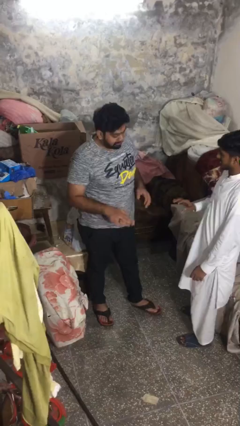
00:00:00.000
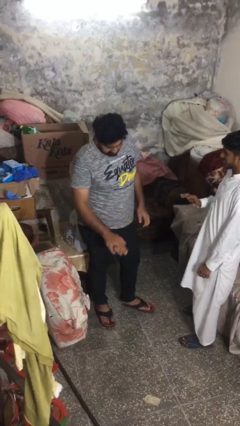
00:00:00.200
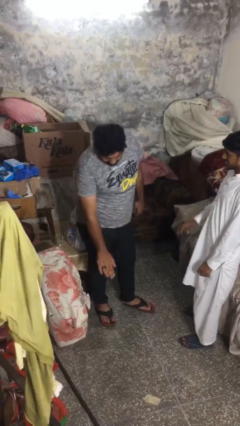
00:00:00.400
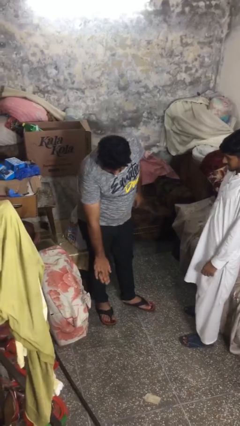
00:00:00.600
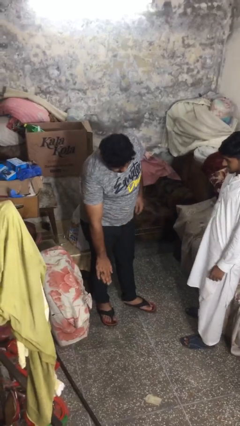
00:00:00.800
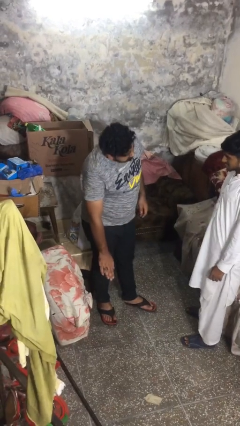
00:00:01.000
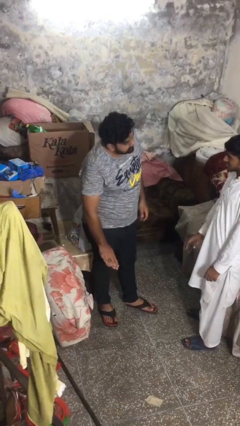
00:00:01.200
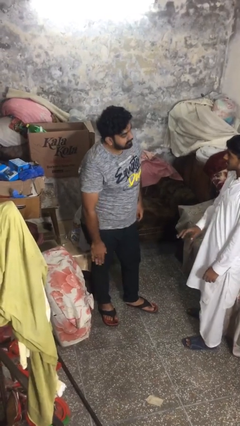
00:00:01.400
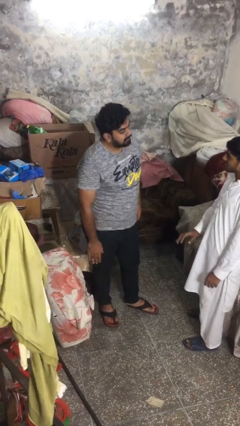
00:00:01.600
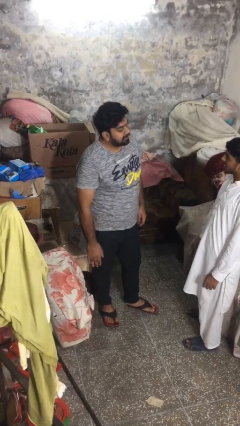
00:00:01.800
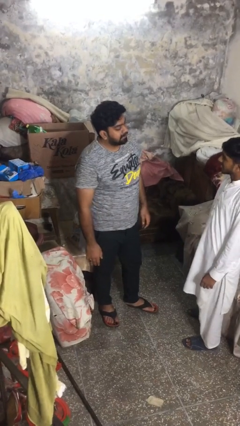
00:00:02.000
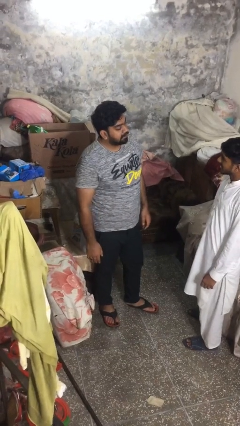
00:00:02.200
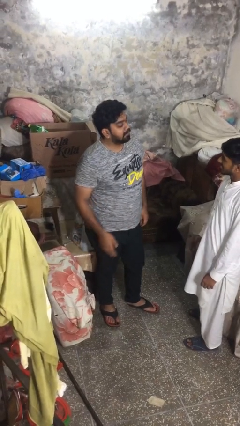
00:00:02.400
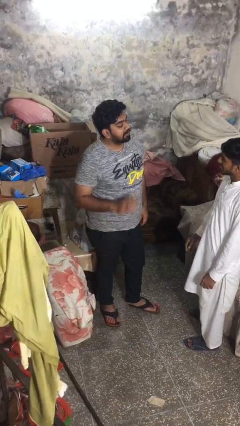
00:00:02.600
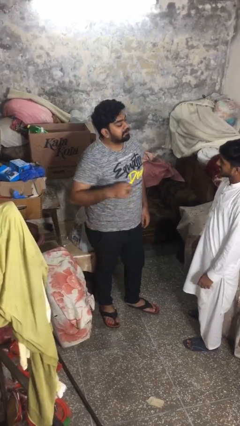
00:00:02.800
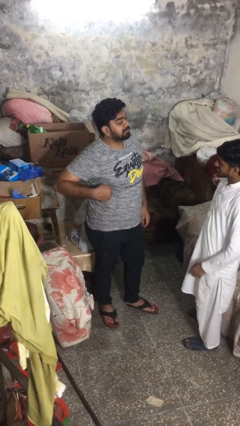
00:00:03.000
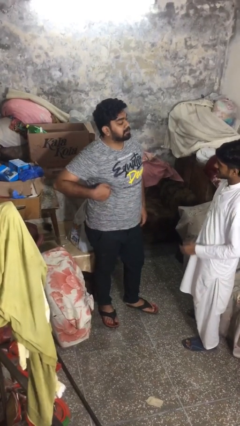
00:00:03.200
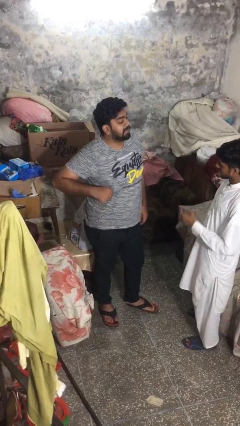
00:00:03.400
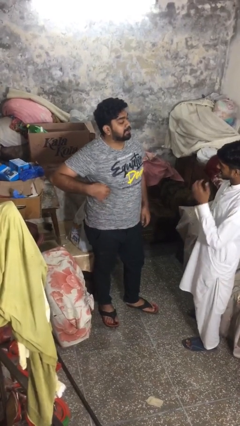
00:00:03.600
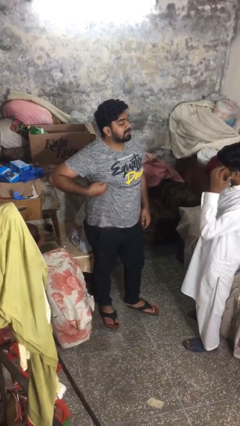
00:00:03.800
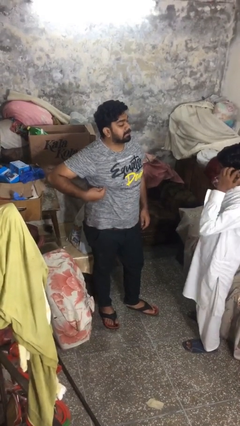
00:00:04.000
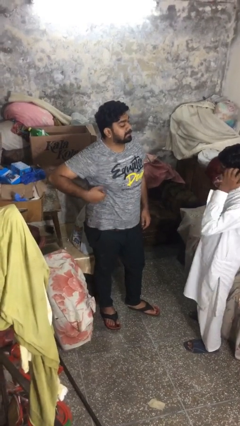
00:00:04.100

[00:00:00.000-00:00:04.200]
person talks to person

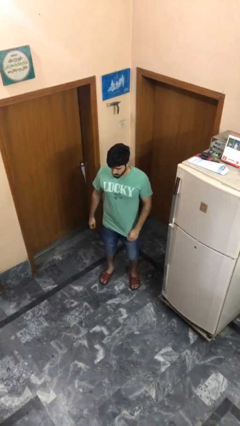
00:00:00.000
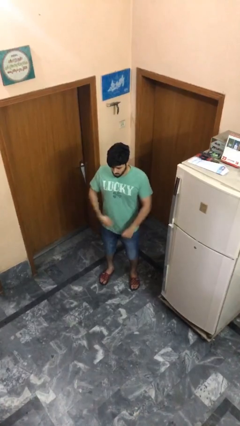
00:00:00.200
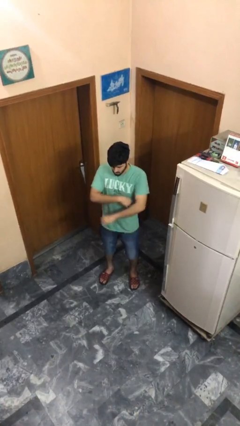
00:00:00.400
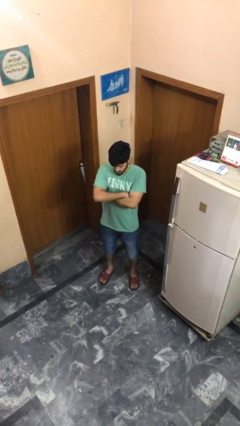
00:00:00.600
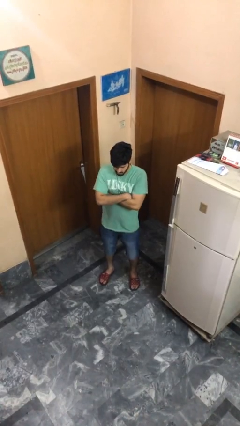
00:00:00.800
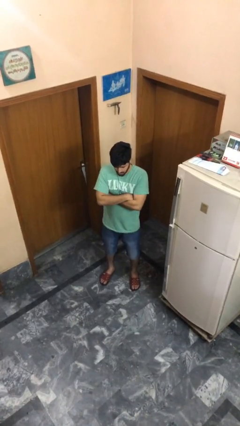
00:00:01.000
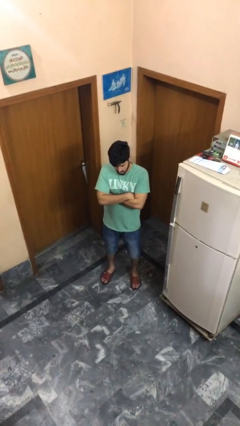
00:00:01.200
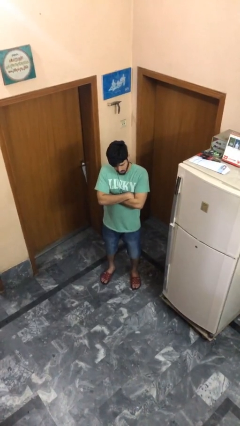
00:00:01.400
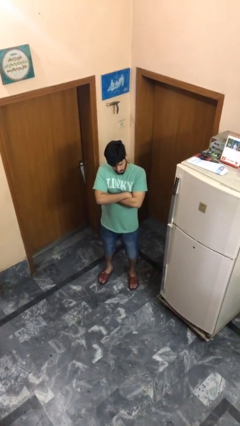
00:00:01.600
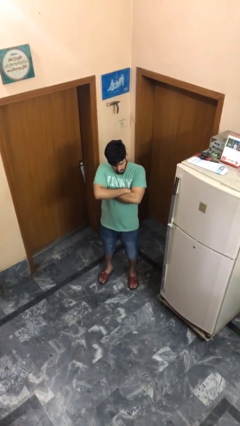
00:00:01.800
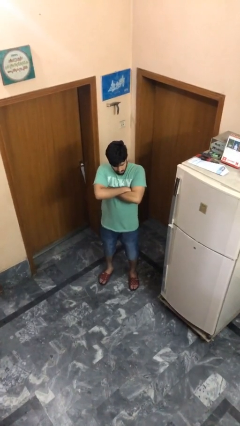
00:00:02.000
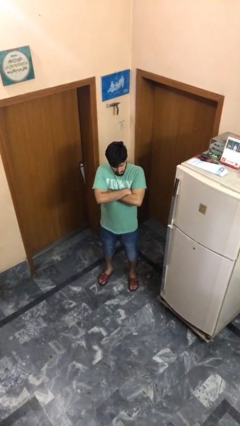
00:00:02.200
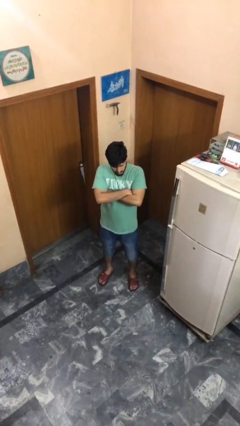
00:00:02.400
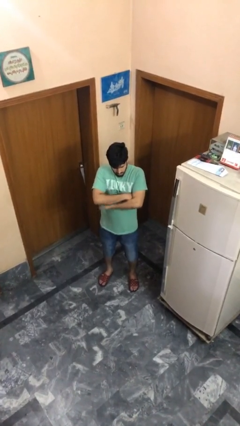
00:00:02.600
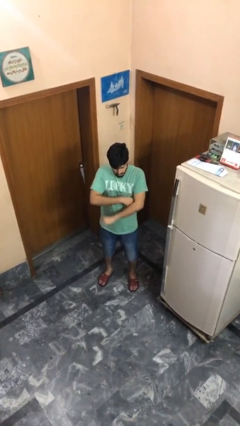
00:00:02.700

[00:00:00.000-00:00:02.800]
person crosses arms

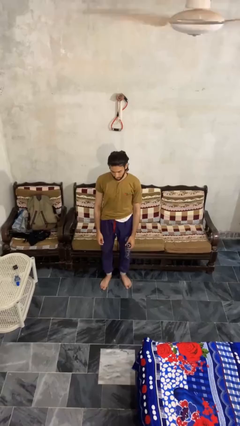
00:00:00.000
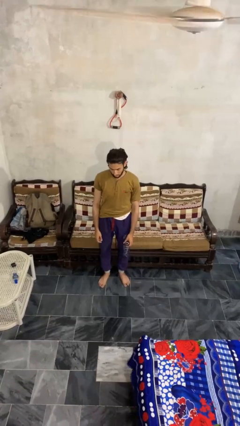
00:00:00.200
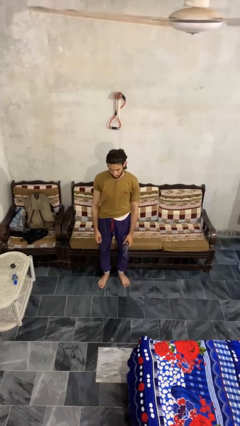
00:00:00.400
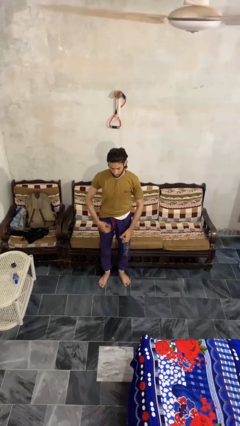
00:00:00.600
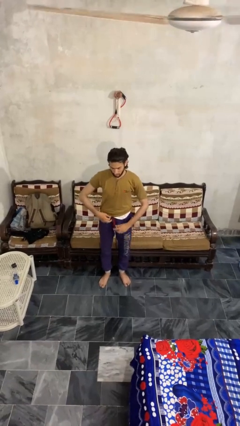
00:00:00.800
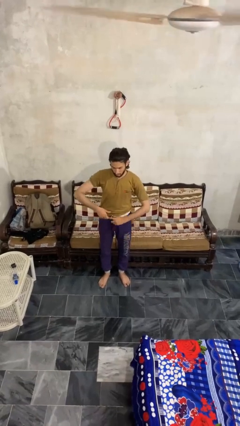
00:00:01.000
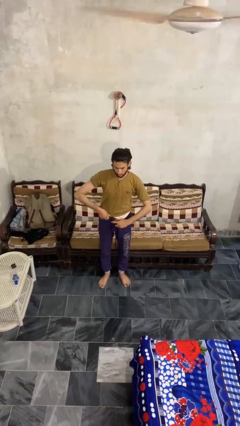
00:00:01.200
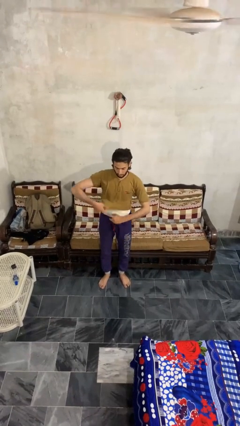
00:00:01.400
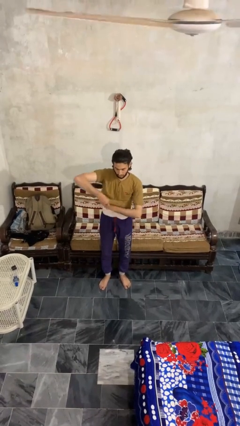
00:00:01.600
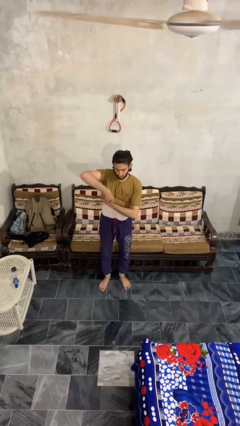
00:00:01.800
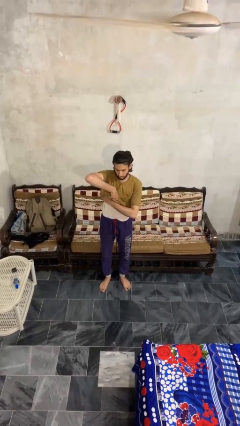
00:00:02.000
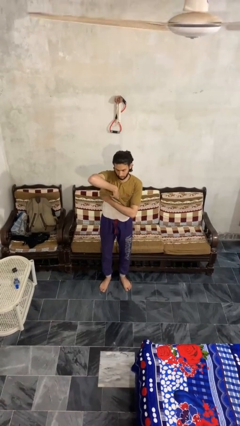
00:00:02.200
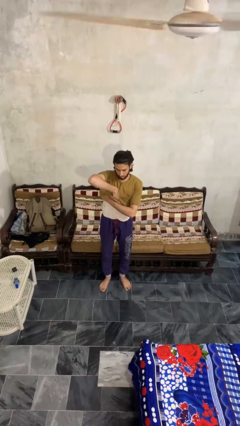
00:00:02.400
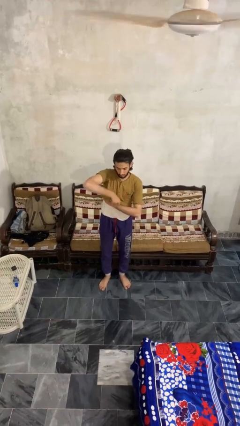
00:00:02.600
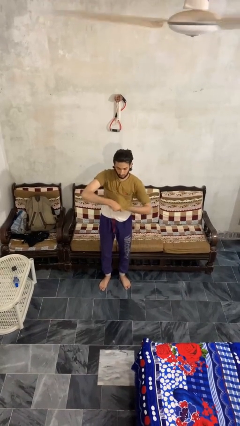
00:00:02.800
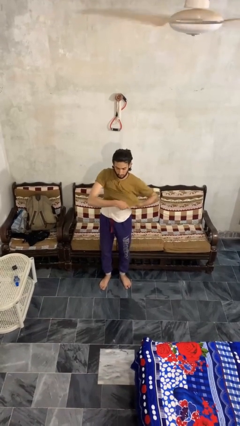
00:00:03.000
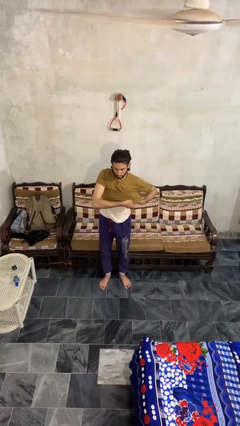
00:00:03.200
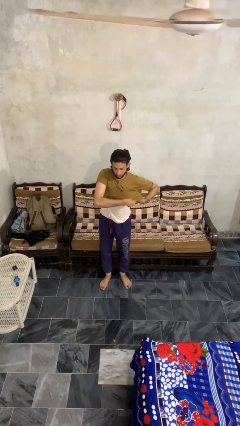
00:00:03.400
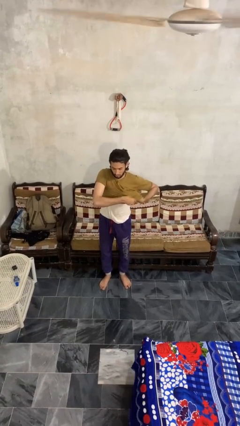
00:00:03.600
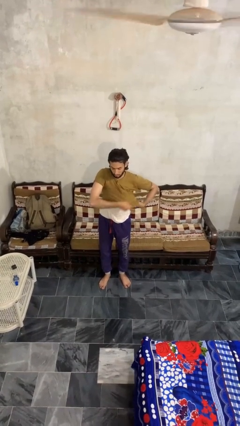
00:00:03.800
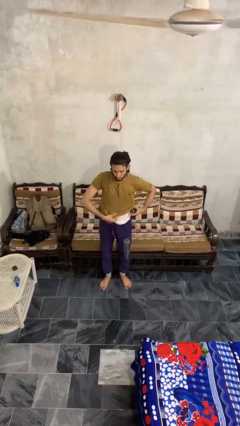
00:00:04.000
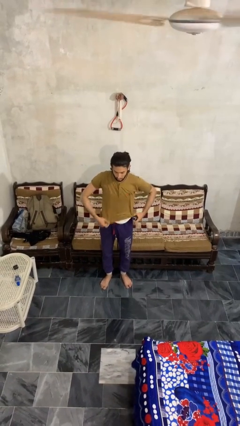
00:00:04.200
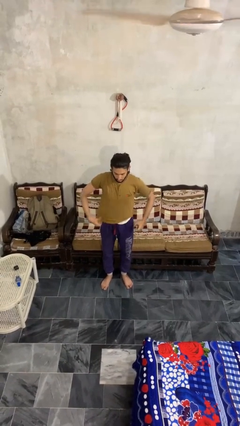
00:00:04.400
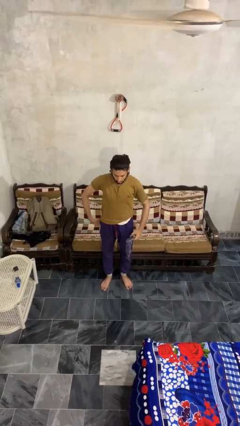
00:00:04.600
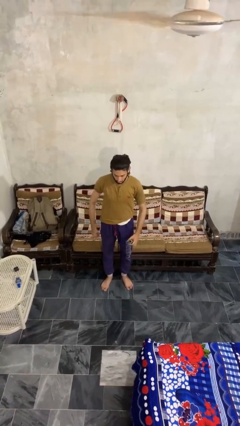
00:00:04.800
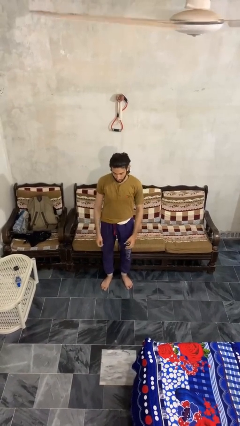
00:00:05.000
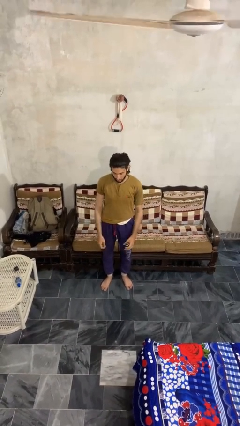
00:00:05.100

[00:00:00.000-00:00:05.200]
person applies deodorant

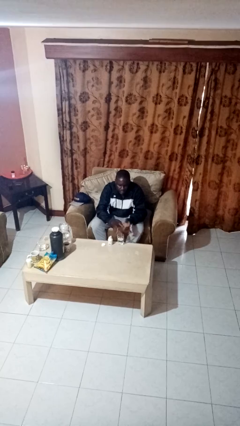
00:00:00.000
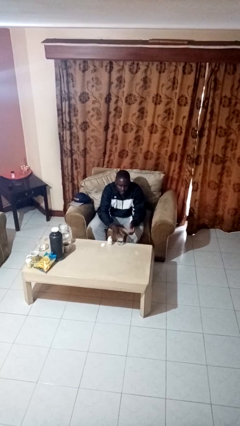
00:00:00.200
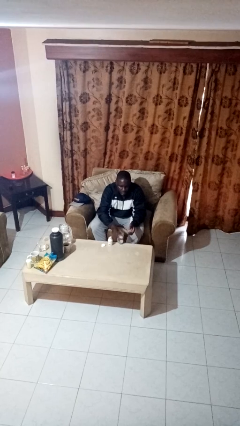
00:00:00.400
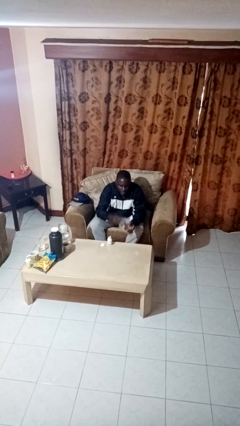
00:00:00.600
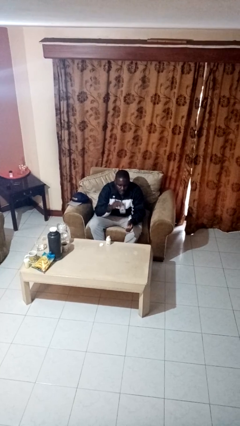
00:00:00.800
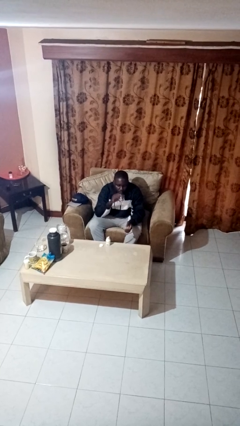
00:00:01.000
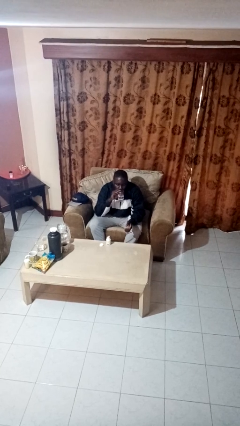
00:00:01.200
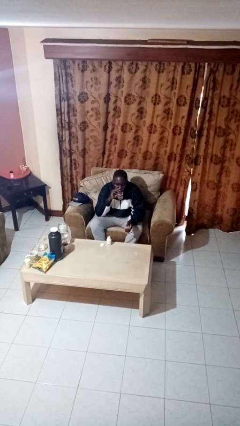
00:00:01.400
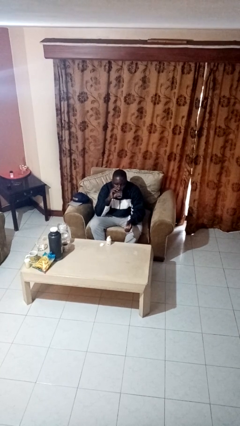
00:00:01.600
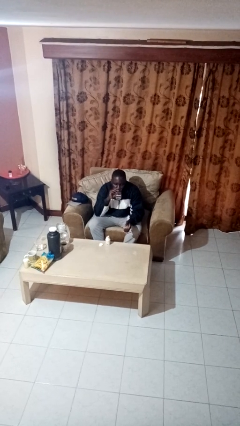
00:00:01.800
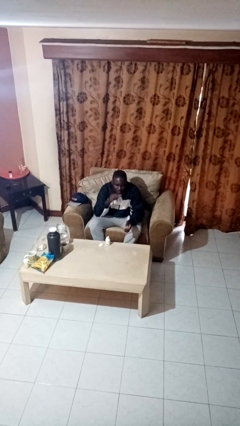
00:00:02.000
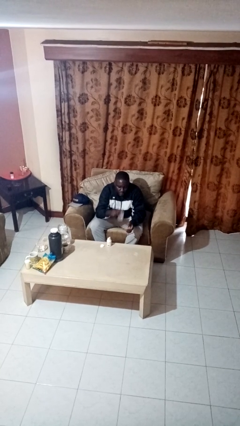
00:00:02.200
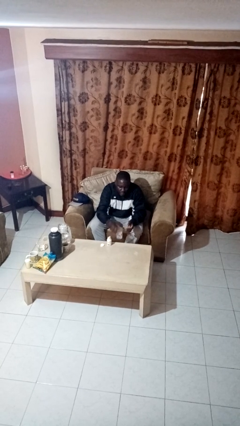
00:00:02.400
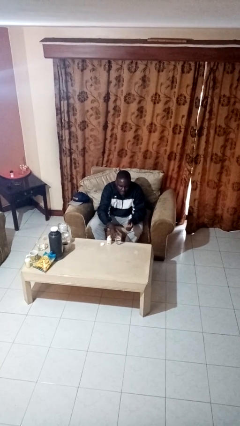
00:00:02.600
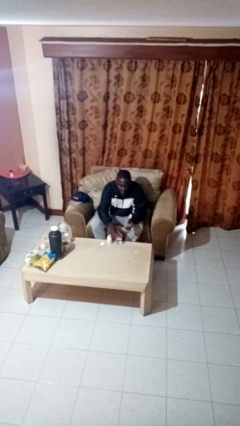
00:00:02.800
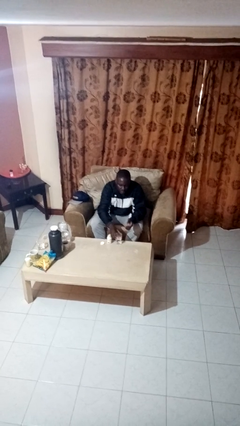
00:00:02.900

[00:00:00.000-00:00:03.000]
person drinks from cup

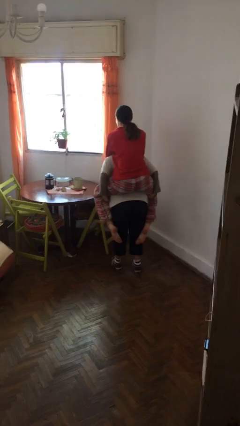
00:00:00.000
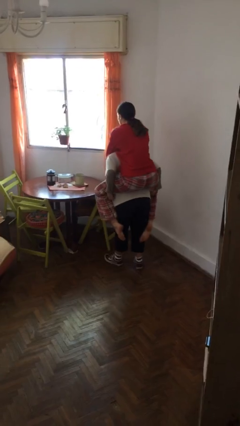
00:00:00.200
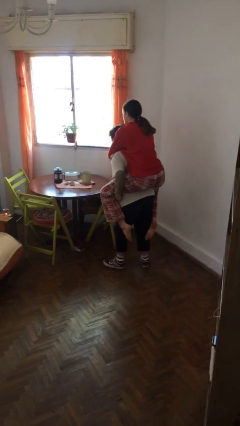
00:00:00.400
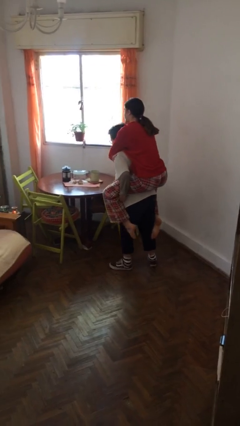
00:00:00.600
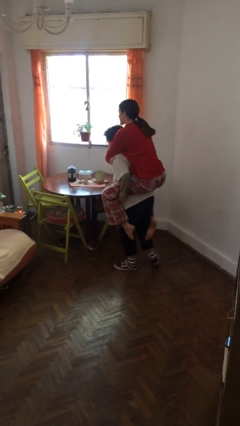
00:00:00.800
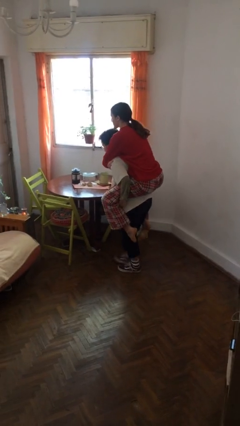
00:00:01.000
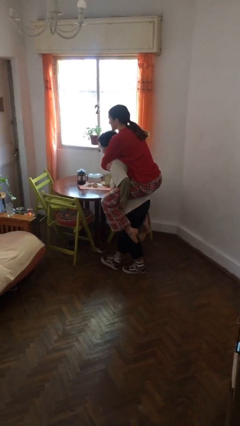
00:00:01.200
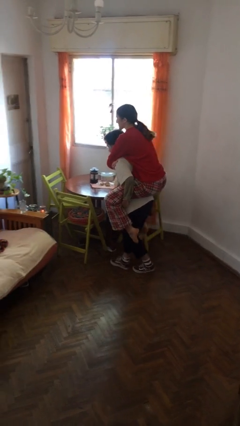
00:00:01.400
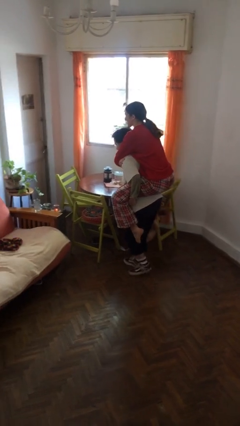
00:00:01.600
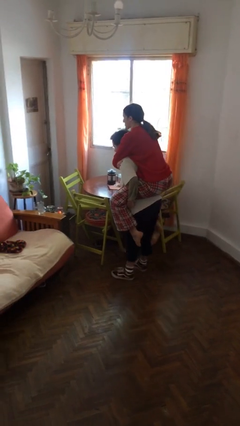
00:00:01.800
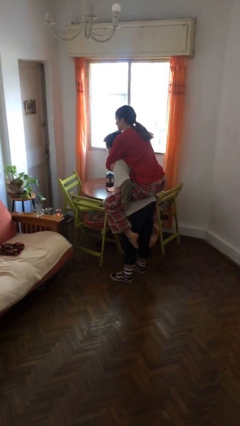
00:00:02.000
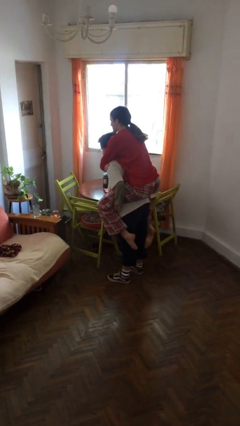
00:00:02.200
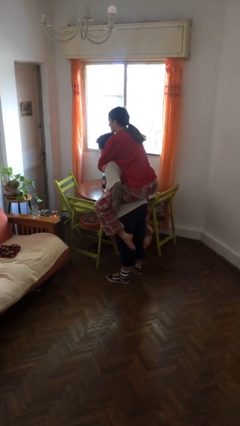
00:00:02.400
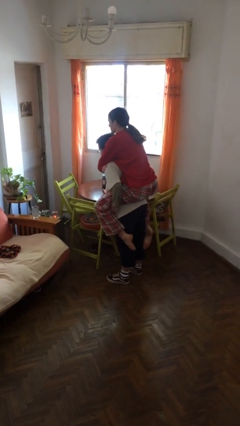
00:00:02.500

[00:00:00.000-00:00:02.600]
person carries person on back

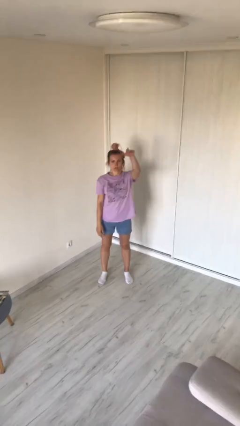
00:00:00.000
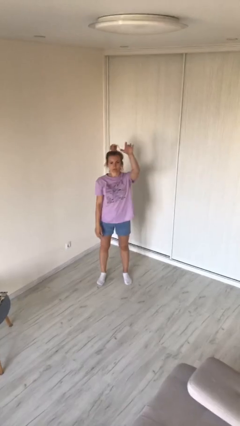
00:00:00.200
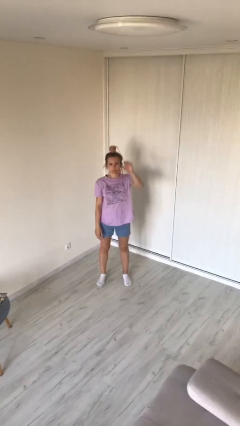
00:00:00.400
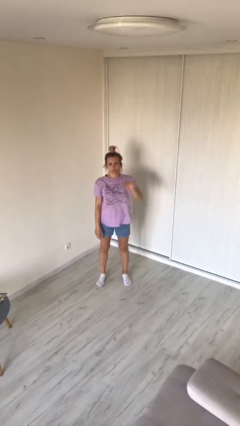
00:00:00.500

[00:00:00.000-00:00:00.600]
person gestures swipe up
